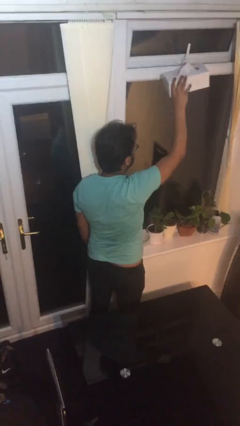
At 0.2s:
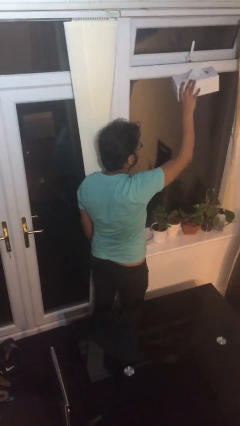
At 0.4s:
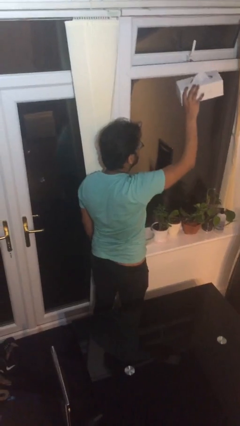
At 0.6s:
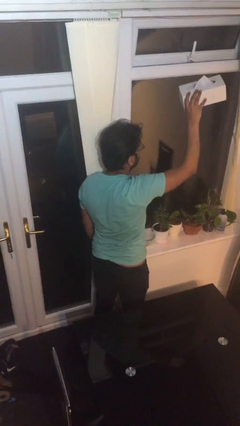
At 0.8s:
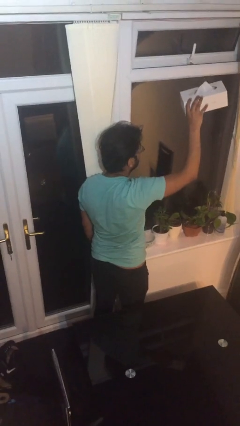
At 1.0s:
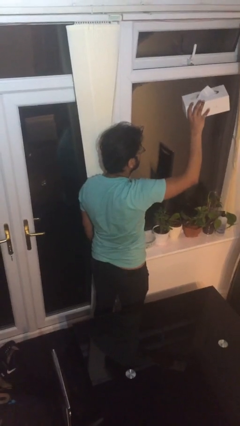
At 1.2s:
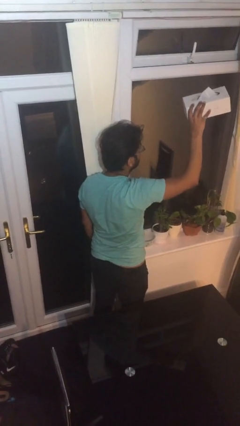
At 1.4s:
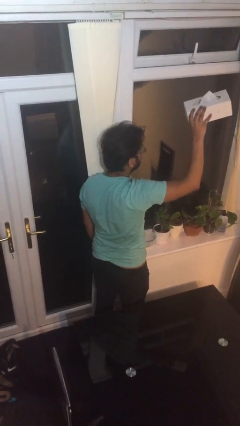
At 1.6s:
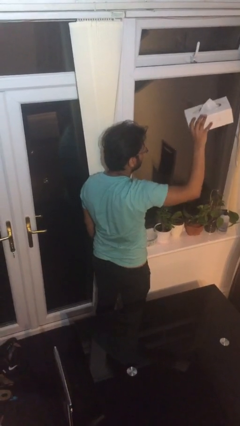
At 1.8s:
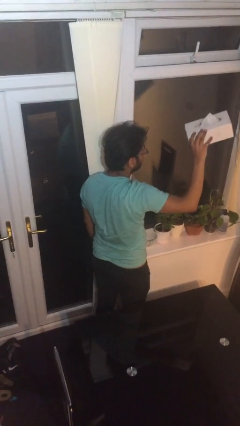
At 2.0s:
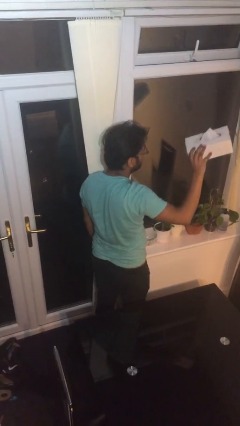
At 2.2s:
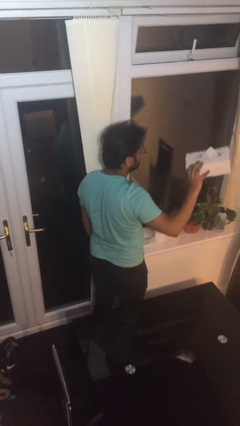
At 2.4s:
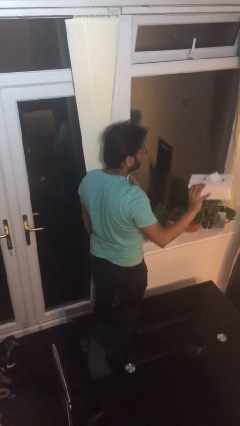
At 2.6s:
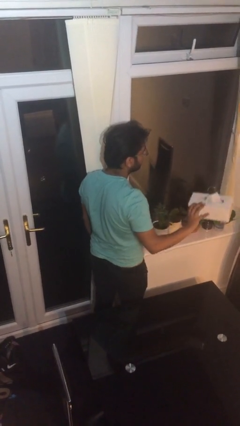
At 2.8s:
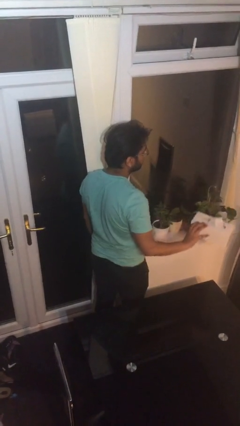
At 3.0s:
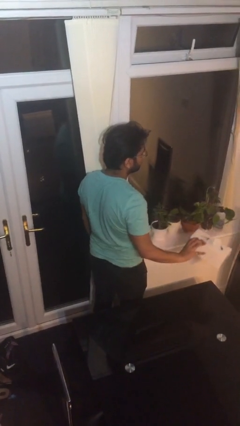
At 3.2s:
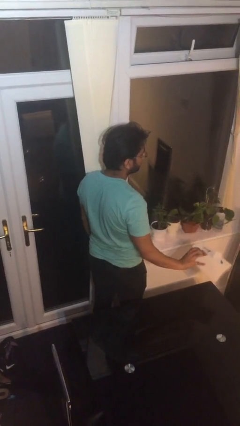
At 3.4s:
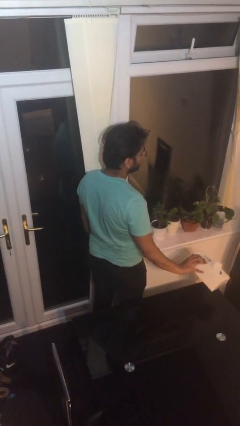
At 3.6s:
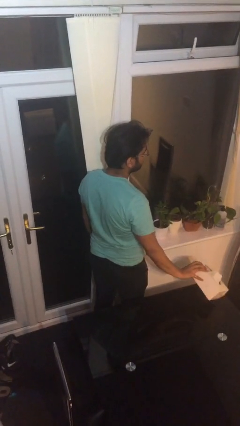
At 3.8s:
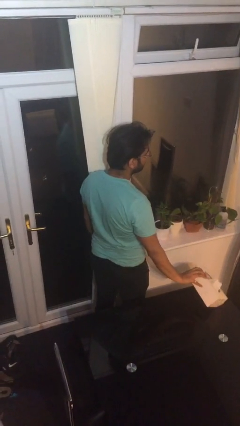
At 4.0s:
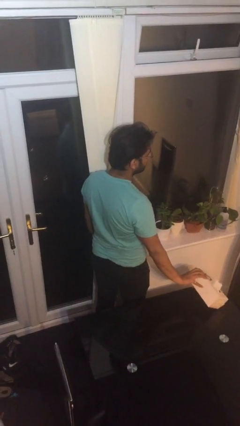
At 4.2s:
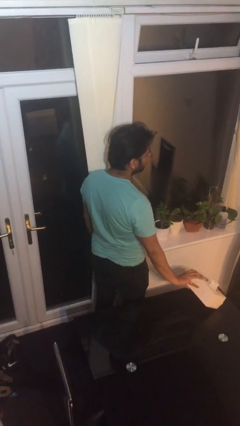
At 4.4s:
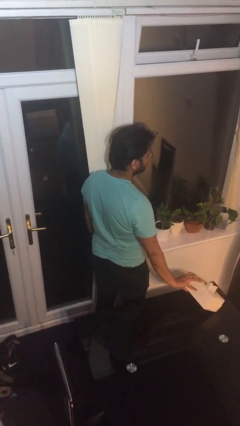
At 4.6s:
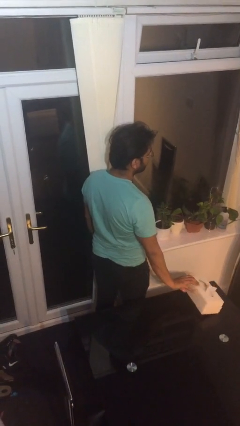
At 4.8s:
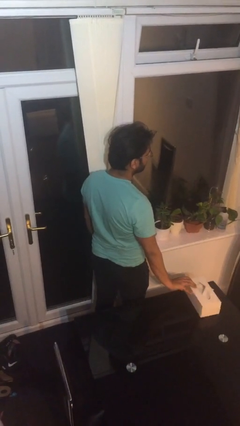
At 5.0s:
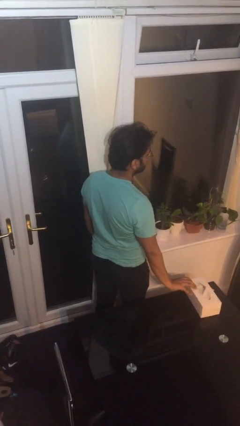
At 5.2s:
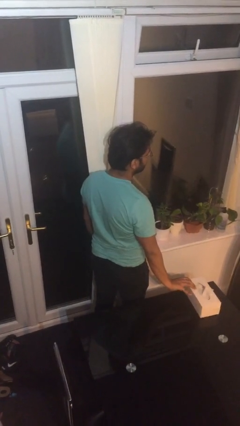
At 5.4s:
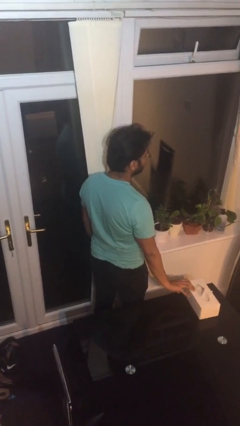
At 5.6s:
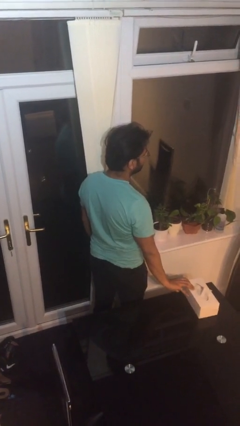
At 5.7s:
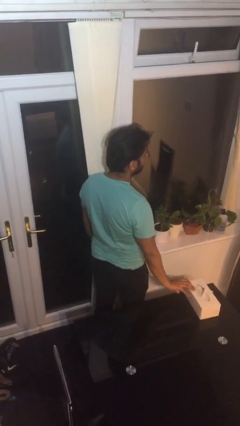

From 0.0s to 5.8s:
person puts down object on table

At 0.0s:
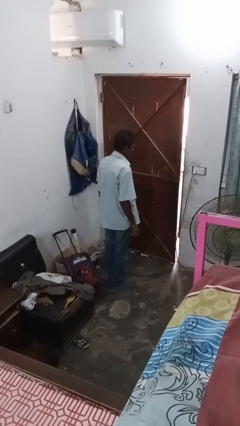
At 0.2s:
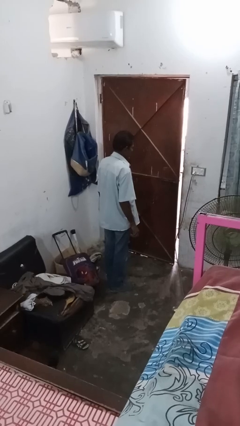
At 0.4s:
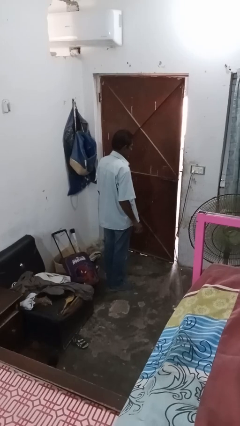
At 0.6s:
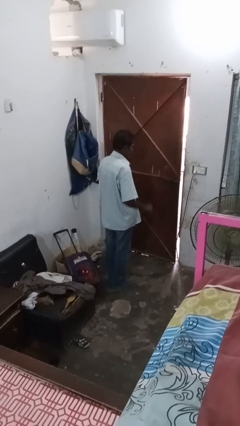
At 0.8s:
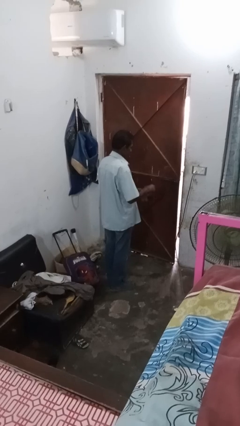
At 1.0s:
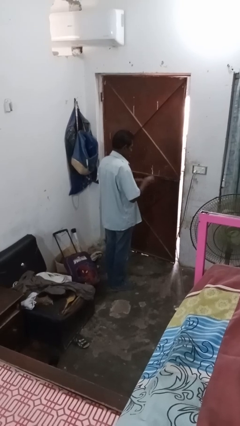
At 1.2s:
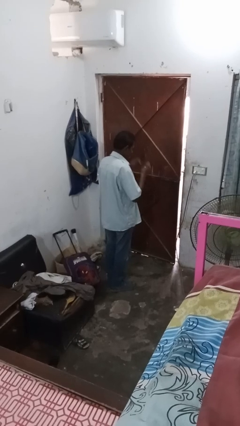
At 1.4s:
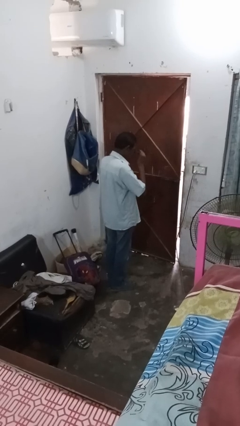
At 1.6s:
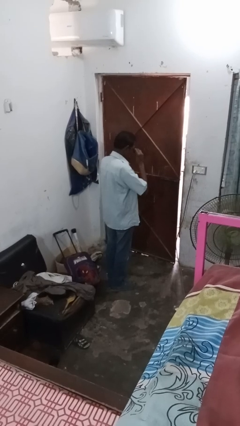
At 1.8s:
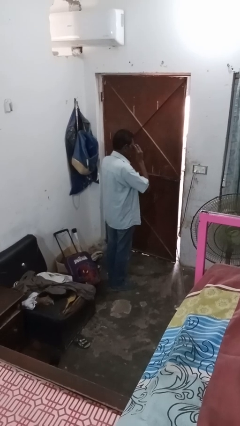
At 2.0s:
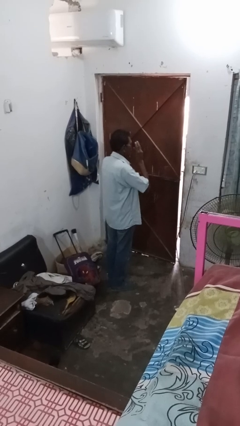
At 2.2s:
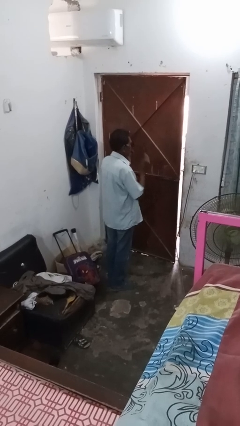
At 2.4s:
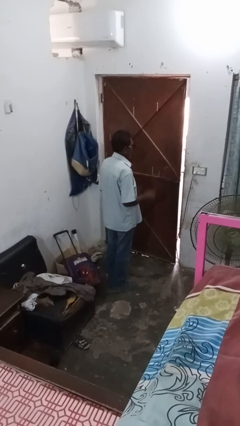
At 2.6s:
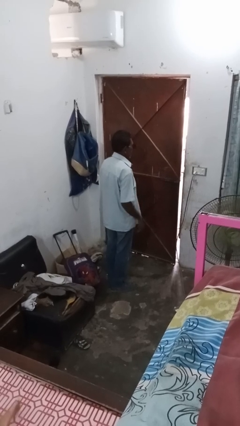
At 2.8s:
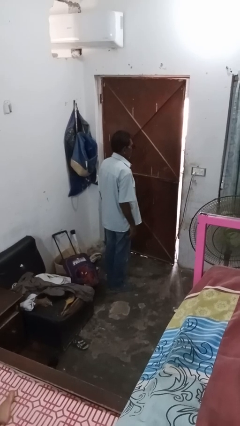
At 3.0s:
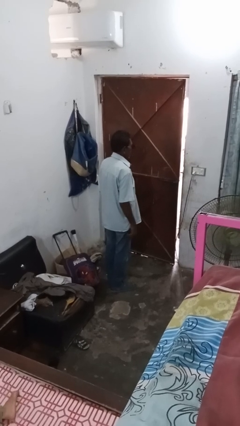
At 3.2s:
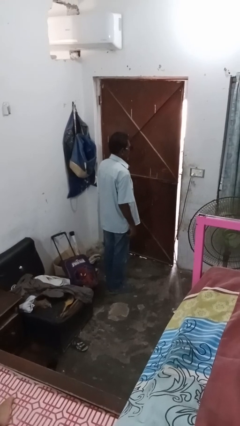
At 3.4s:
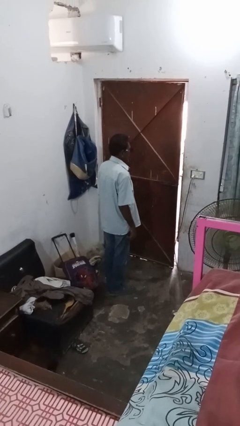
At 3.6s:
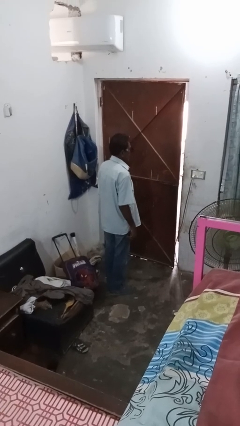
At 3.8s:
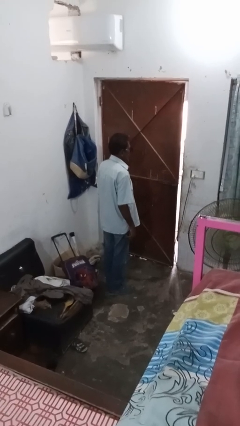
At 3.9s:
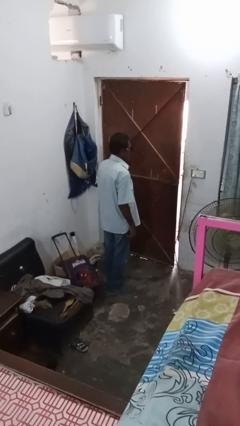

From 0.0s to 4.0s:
person puts on sunglasses

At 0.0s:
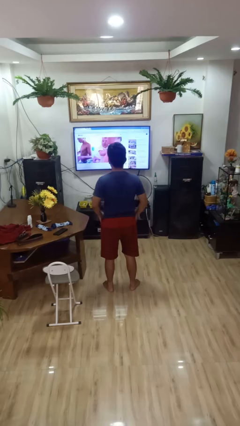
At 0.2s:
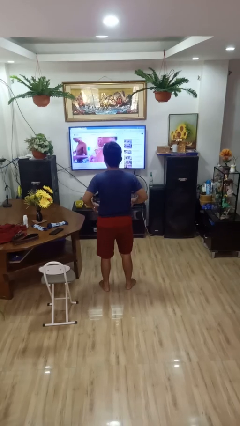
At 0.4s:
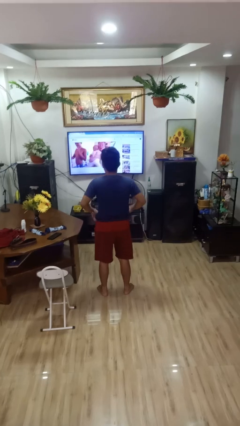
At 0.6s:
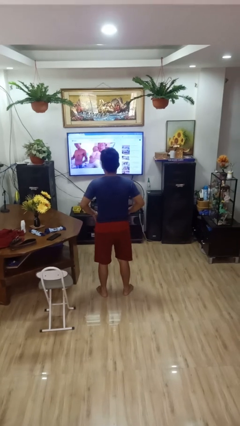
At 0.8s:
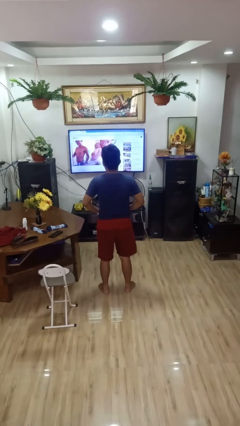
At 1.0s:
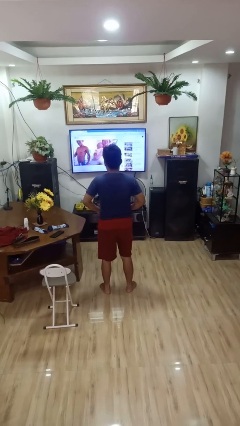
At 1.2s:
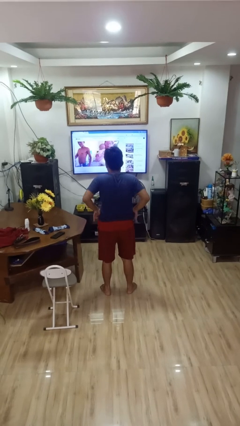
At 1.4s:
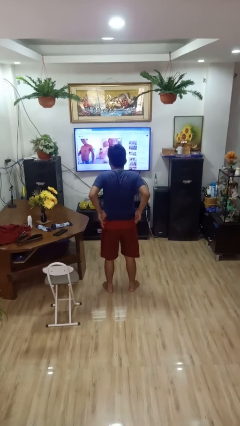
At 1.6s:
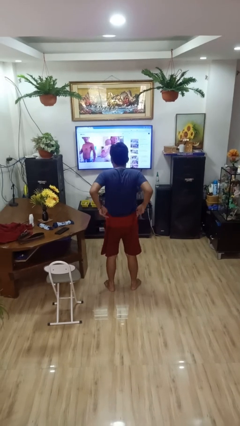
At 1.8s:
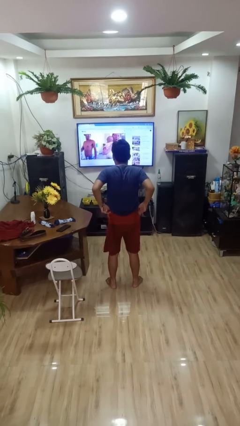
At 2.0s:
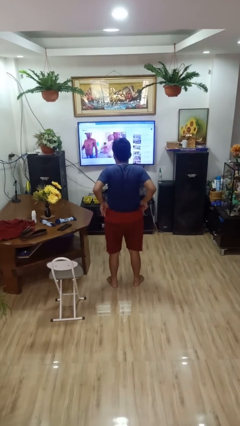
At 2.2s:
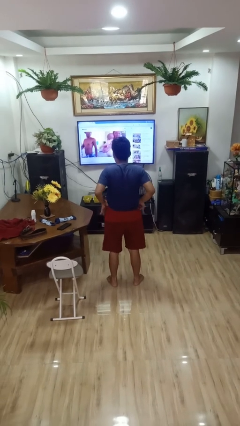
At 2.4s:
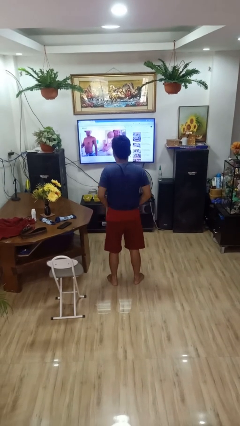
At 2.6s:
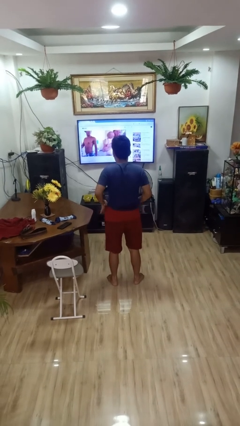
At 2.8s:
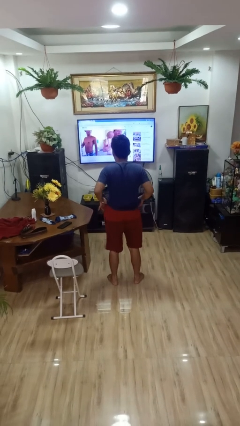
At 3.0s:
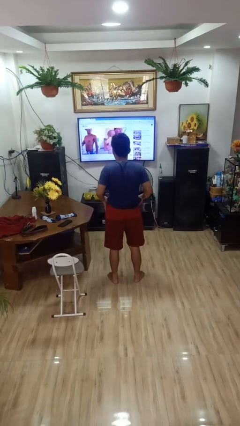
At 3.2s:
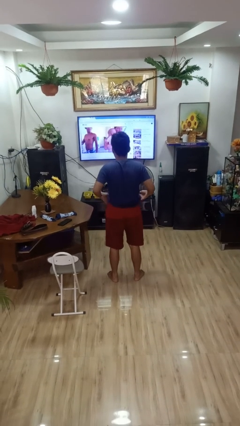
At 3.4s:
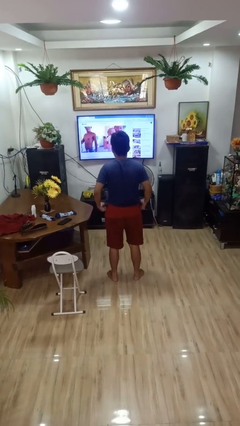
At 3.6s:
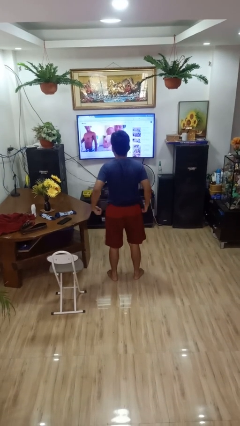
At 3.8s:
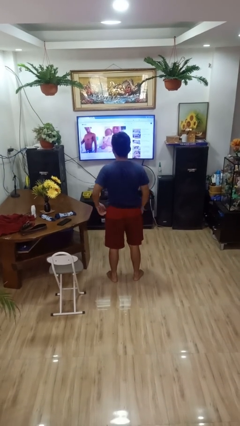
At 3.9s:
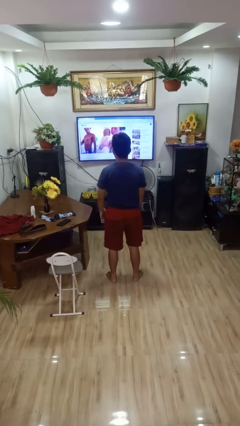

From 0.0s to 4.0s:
person hikes up pants

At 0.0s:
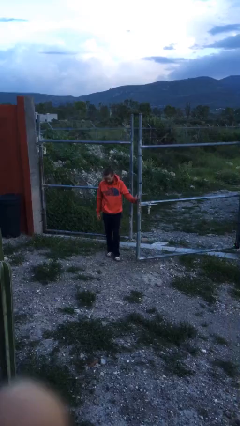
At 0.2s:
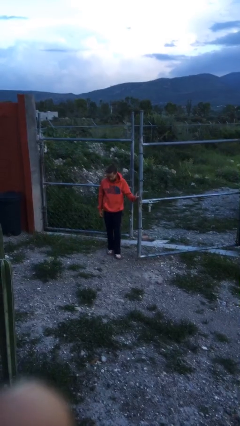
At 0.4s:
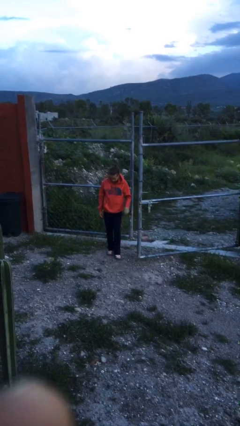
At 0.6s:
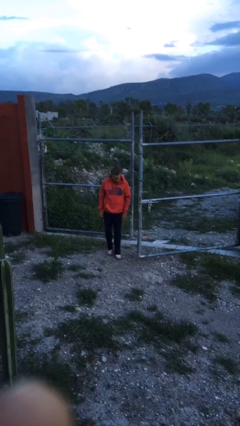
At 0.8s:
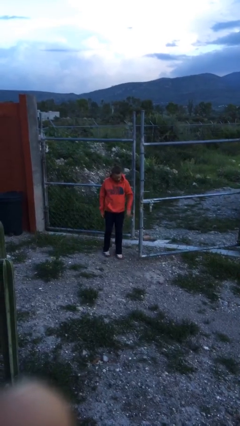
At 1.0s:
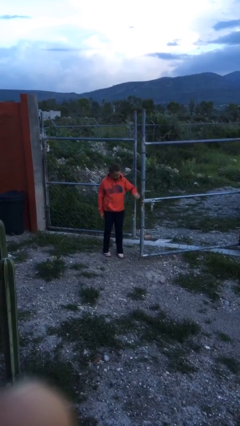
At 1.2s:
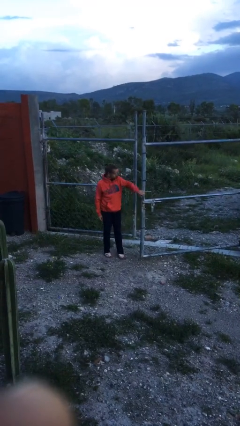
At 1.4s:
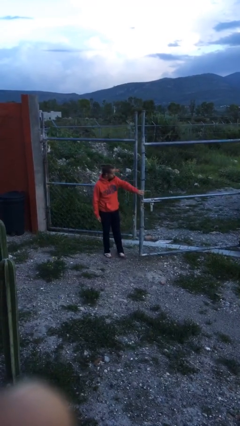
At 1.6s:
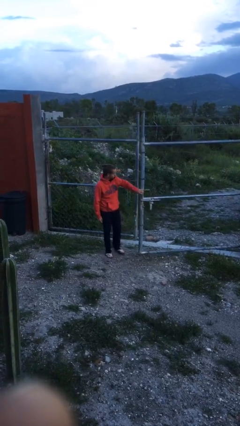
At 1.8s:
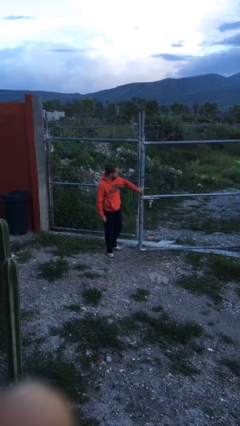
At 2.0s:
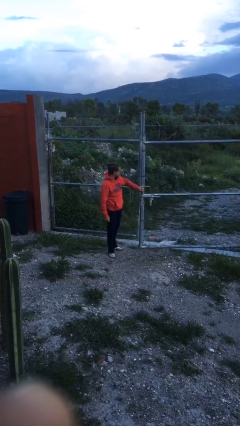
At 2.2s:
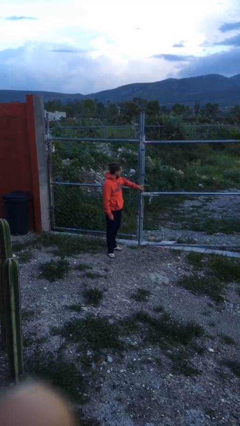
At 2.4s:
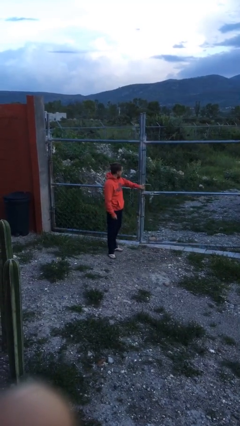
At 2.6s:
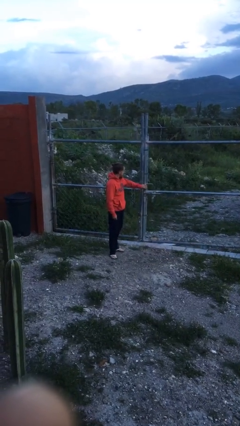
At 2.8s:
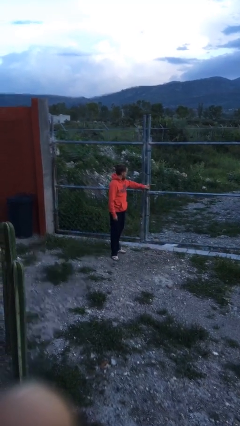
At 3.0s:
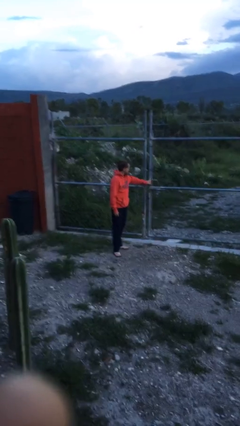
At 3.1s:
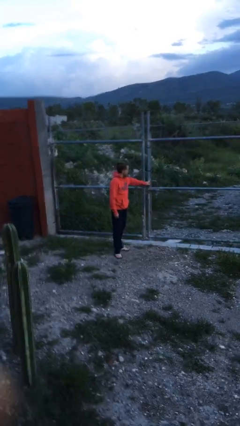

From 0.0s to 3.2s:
person closes gate

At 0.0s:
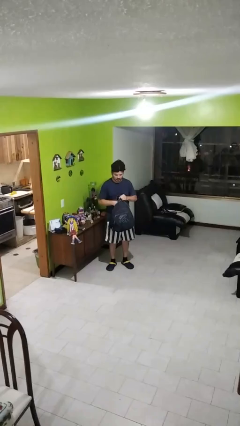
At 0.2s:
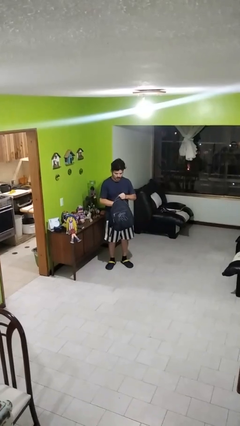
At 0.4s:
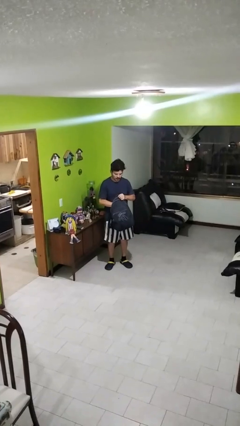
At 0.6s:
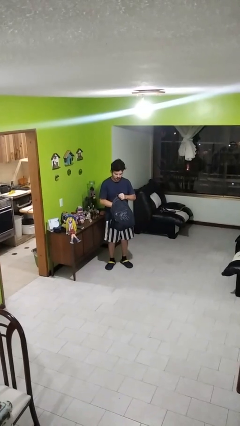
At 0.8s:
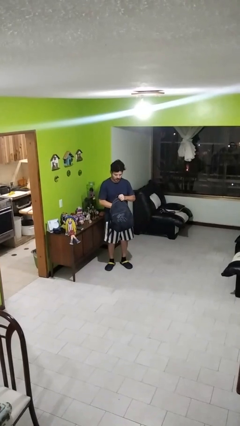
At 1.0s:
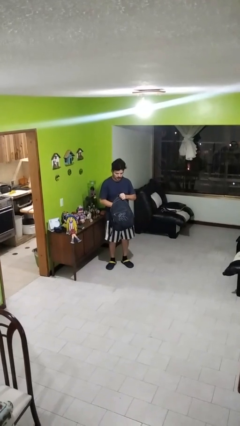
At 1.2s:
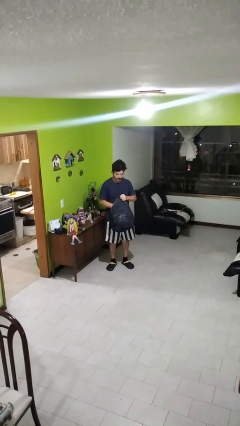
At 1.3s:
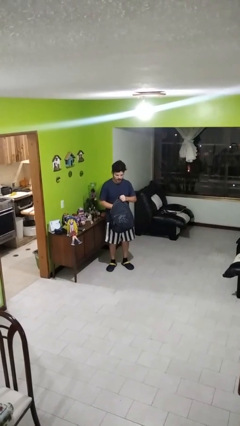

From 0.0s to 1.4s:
person searches in backpack
